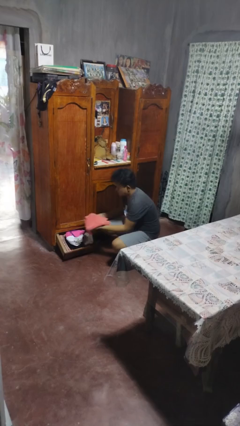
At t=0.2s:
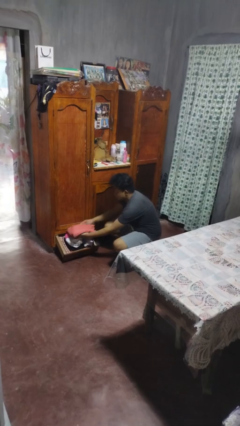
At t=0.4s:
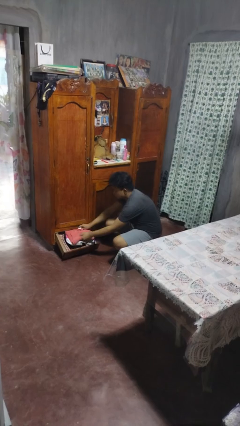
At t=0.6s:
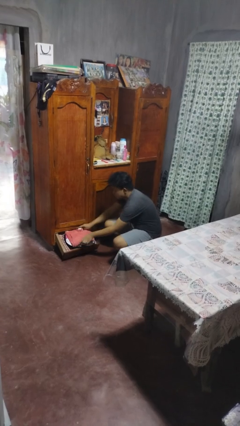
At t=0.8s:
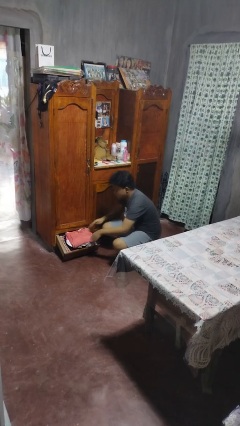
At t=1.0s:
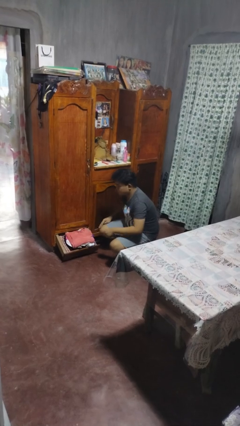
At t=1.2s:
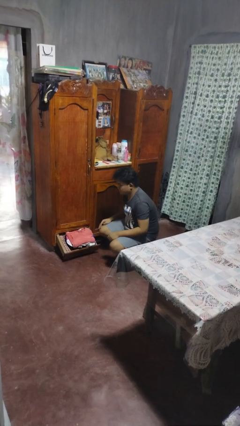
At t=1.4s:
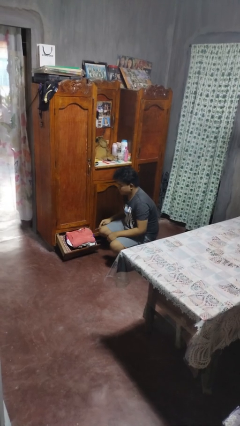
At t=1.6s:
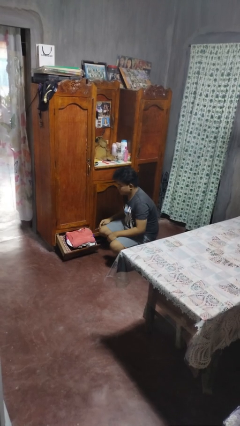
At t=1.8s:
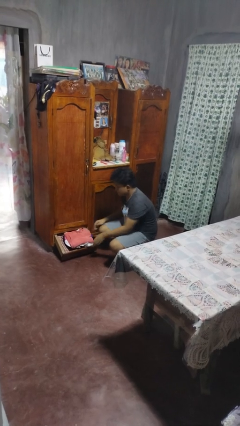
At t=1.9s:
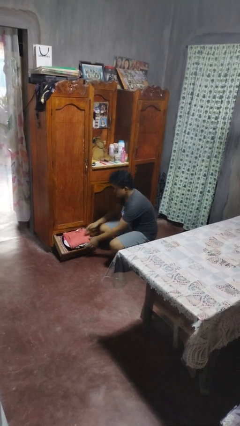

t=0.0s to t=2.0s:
person puts clothes into dresser

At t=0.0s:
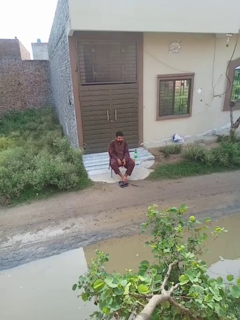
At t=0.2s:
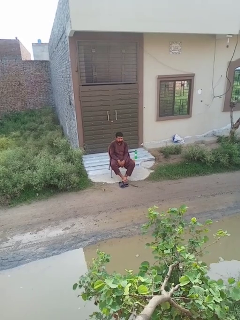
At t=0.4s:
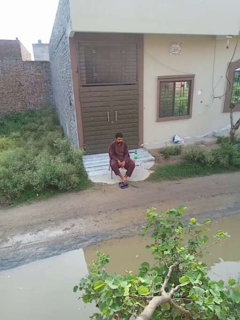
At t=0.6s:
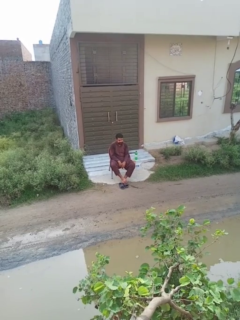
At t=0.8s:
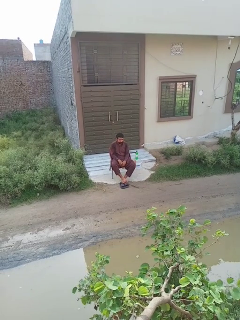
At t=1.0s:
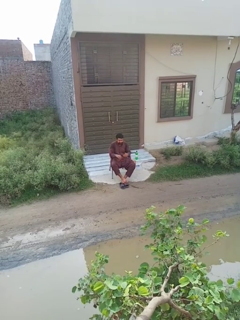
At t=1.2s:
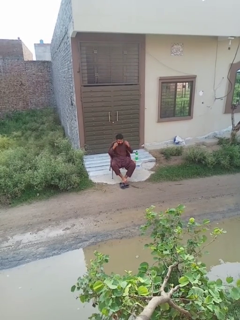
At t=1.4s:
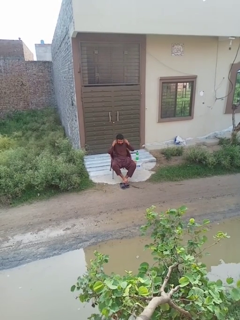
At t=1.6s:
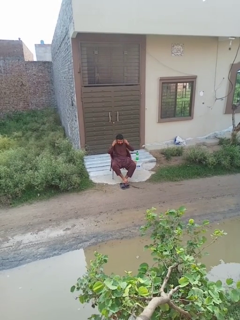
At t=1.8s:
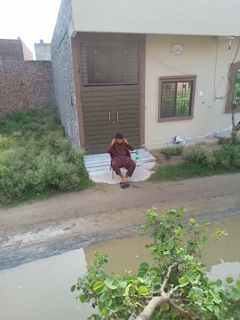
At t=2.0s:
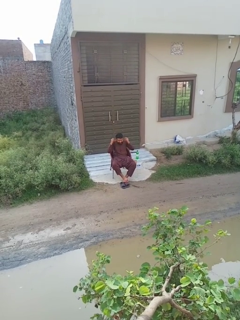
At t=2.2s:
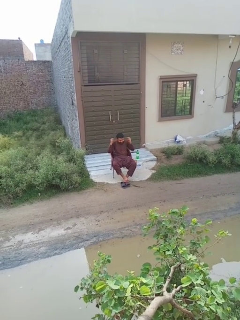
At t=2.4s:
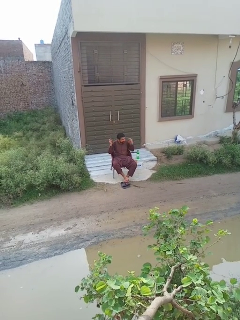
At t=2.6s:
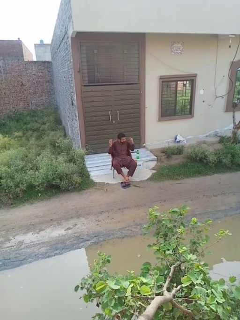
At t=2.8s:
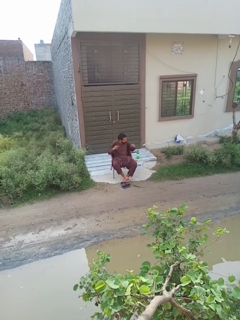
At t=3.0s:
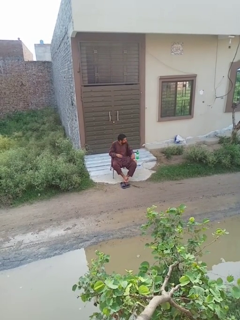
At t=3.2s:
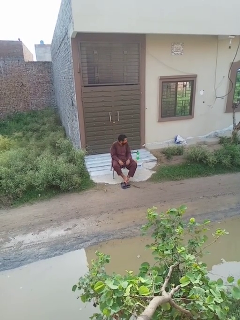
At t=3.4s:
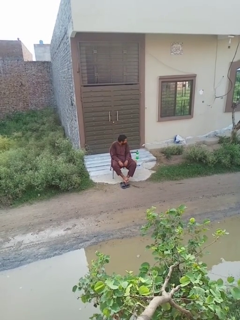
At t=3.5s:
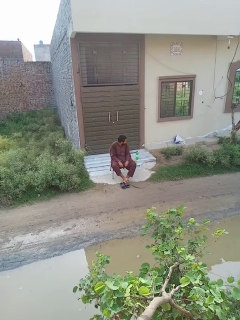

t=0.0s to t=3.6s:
person takes off earrings

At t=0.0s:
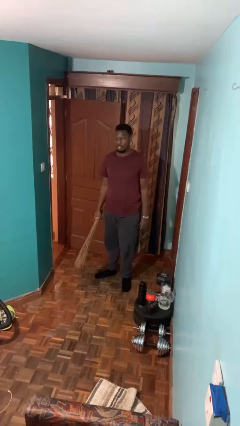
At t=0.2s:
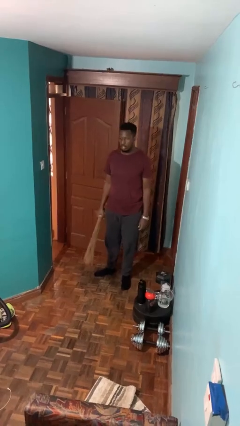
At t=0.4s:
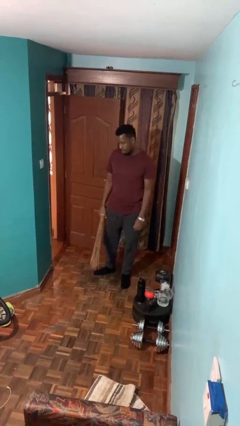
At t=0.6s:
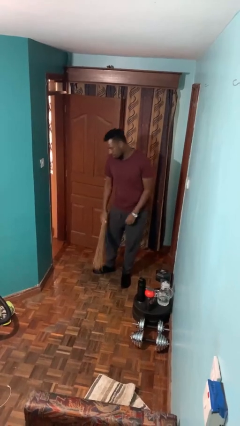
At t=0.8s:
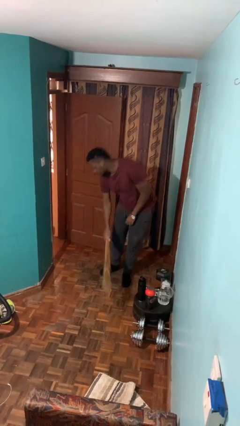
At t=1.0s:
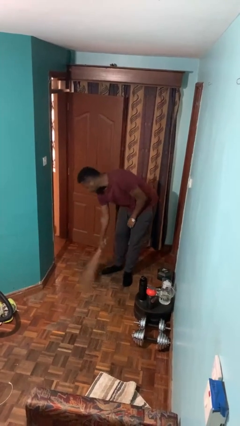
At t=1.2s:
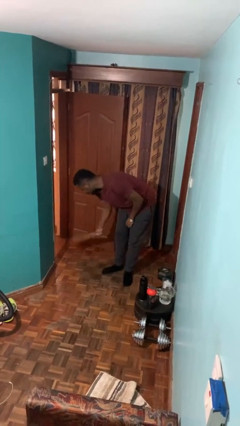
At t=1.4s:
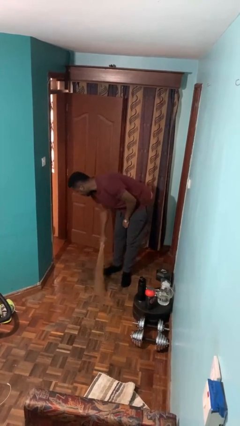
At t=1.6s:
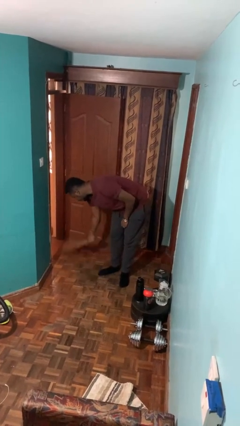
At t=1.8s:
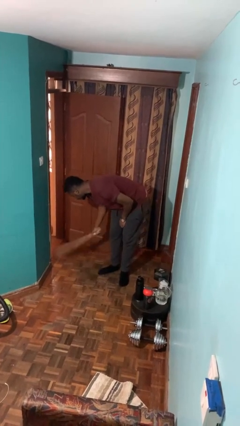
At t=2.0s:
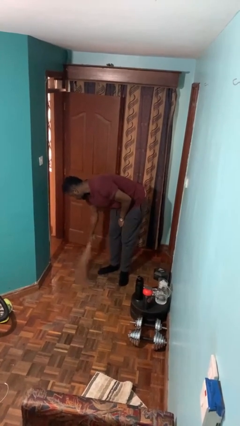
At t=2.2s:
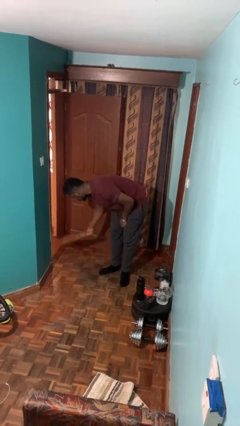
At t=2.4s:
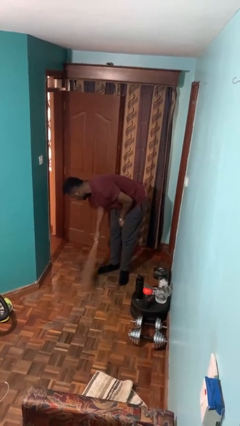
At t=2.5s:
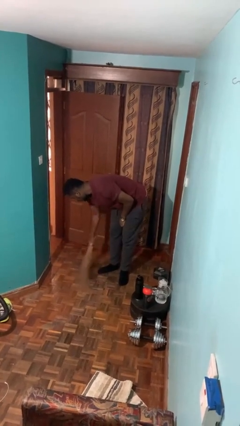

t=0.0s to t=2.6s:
person sweeps floor

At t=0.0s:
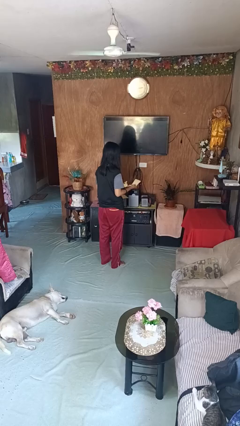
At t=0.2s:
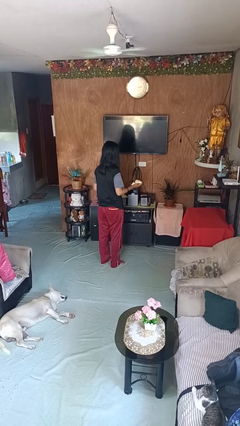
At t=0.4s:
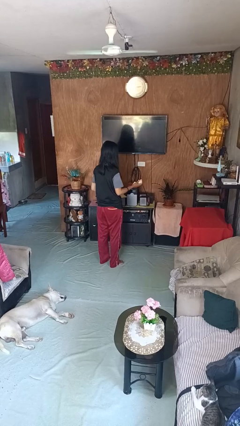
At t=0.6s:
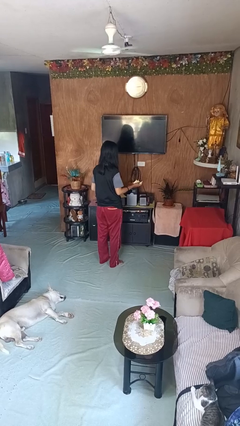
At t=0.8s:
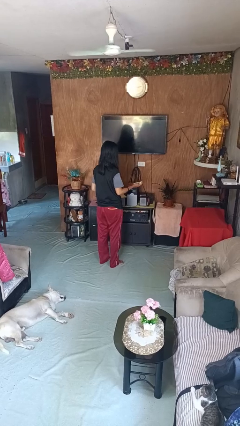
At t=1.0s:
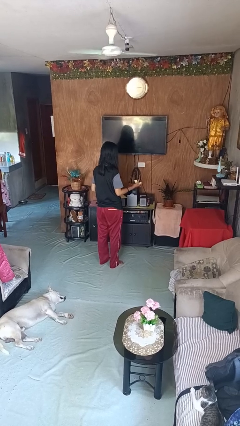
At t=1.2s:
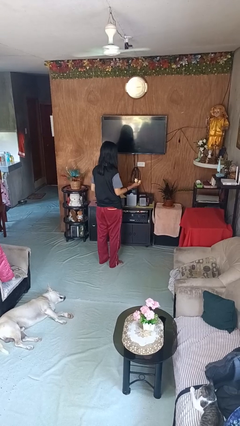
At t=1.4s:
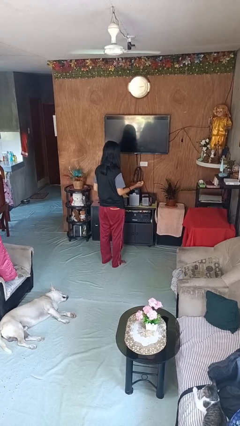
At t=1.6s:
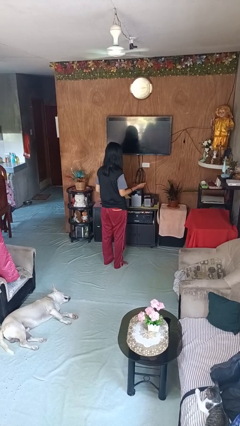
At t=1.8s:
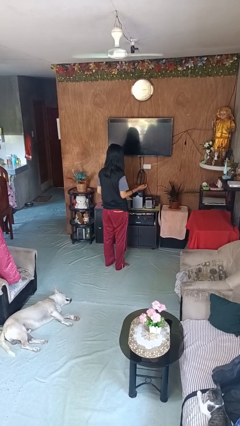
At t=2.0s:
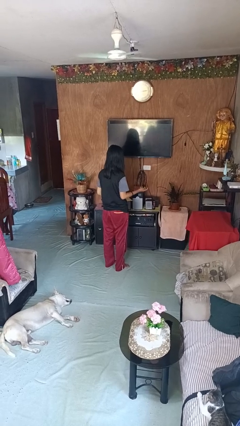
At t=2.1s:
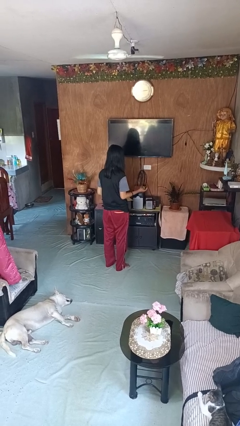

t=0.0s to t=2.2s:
person crumples paper

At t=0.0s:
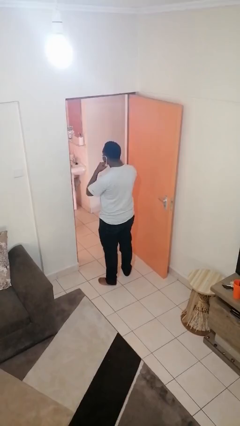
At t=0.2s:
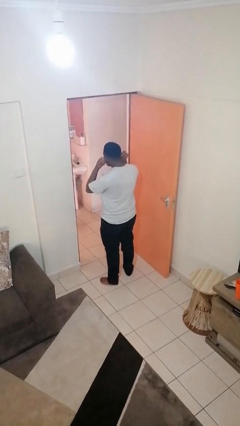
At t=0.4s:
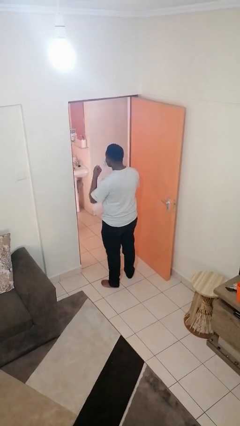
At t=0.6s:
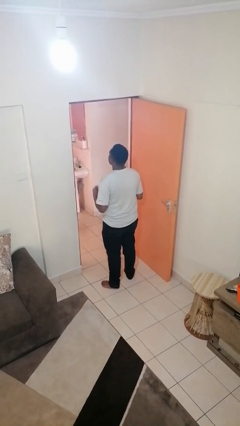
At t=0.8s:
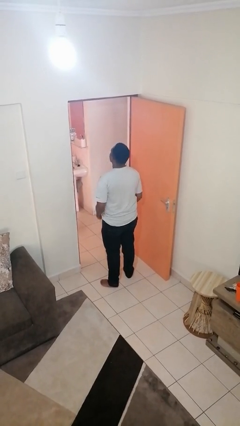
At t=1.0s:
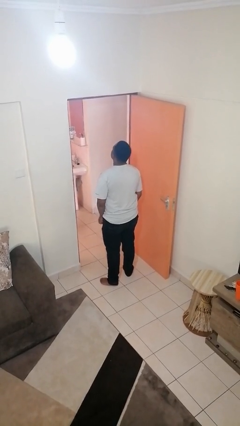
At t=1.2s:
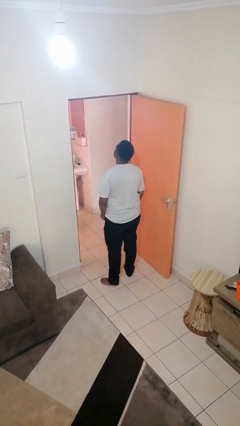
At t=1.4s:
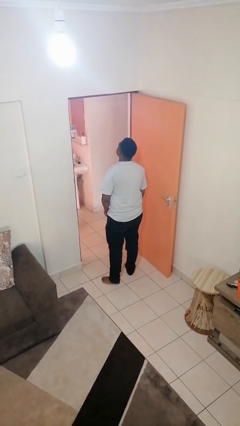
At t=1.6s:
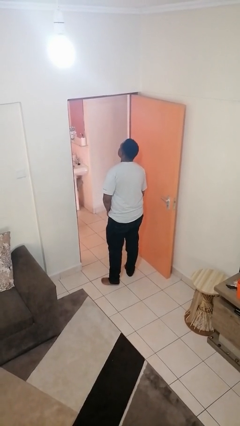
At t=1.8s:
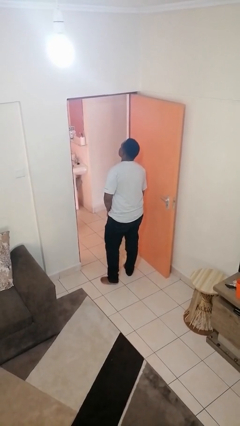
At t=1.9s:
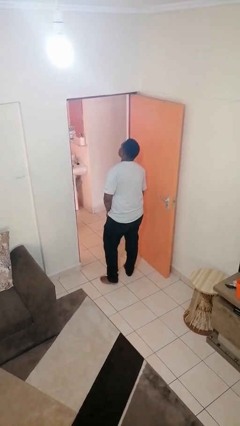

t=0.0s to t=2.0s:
person takes off facemask

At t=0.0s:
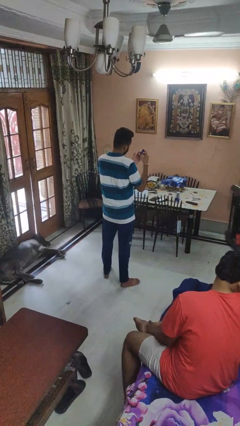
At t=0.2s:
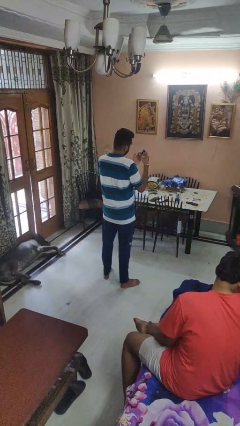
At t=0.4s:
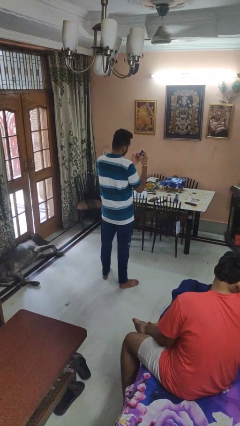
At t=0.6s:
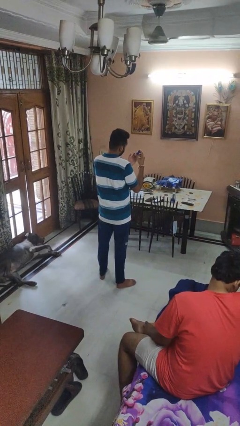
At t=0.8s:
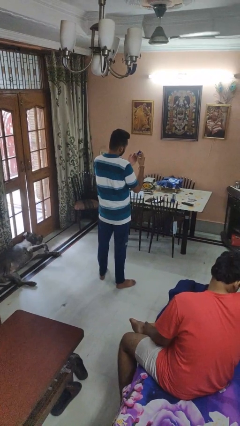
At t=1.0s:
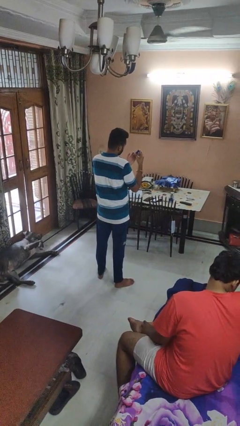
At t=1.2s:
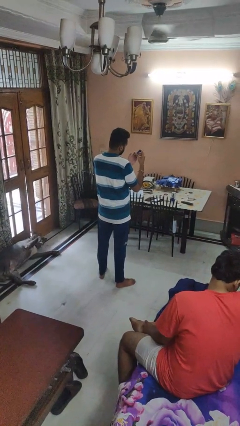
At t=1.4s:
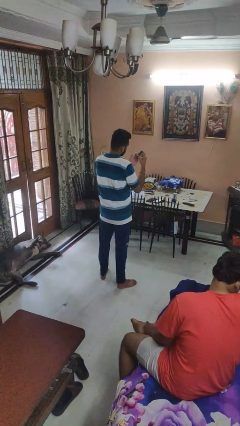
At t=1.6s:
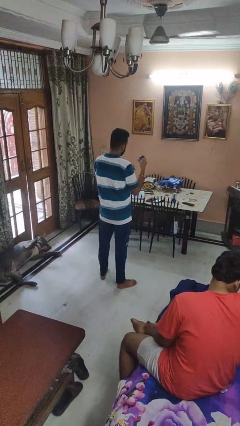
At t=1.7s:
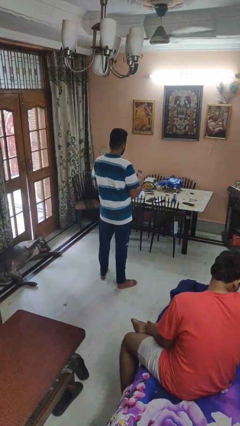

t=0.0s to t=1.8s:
person clips fingernails

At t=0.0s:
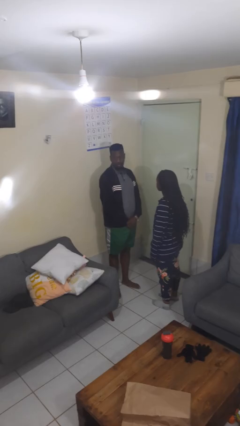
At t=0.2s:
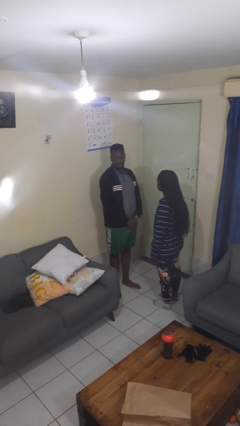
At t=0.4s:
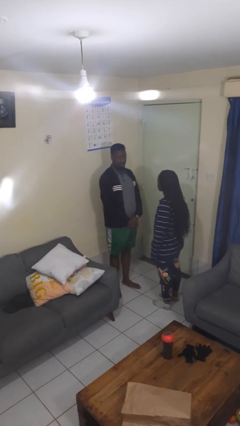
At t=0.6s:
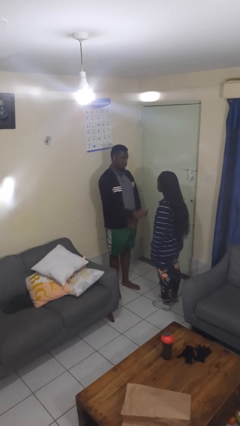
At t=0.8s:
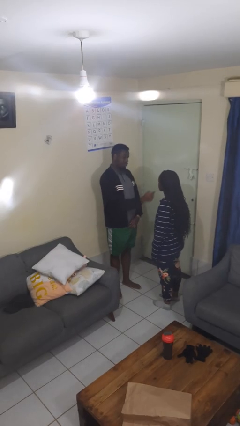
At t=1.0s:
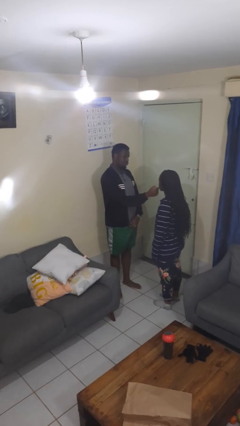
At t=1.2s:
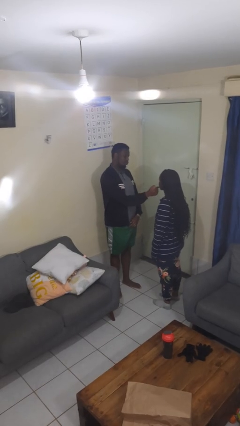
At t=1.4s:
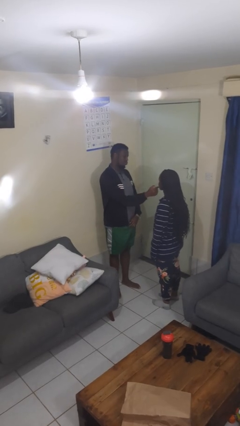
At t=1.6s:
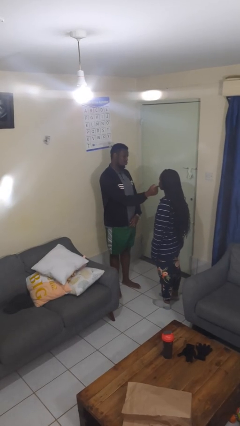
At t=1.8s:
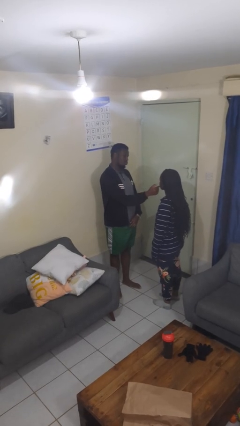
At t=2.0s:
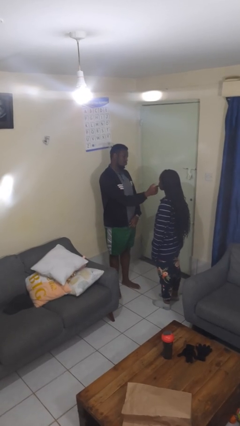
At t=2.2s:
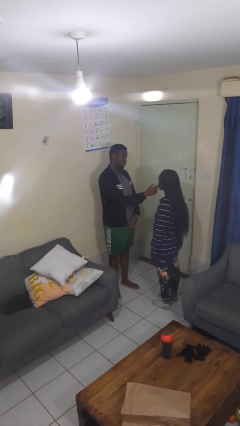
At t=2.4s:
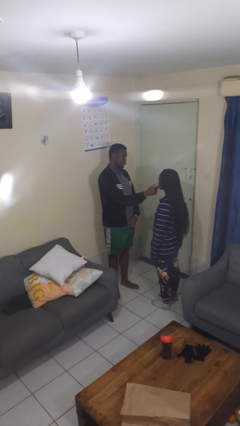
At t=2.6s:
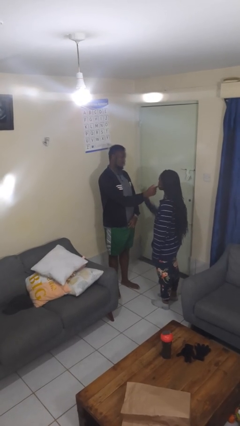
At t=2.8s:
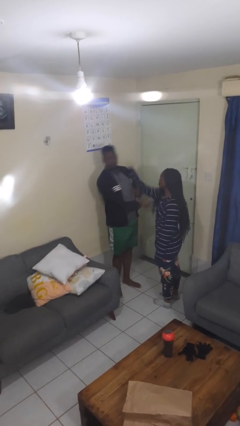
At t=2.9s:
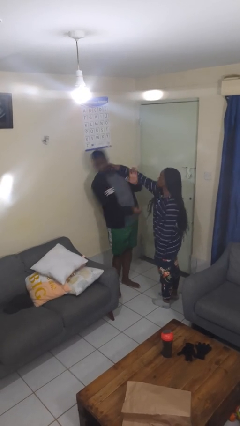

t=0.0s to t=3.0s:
person touches face of person

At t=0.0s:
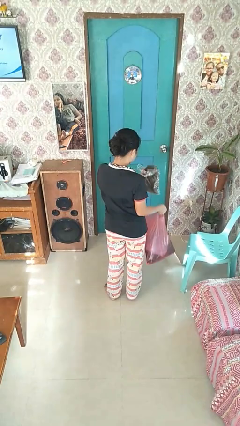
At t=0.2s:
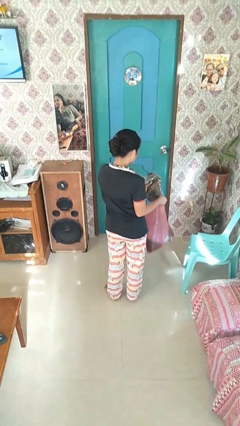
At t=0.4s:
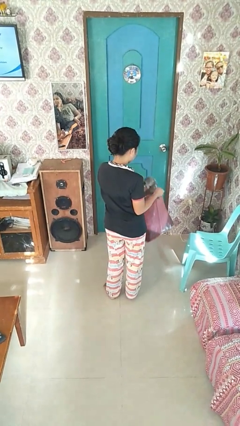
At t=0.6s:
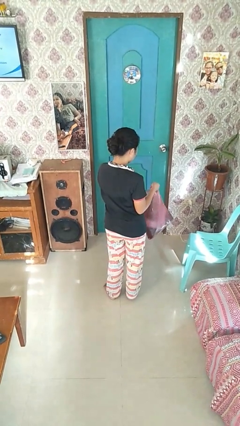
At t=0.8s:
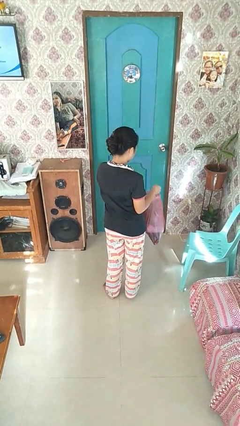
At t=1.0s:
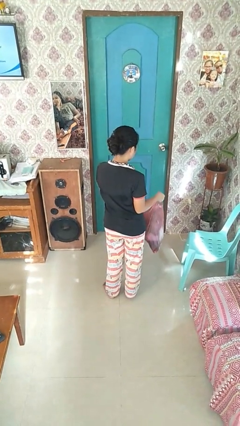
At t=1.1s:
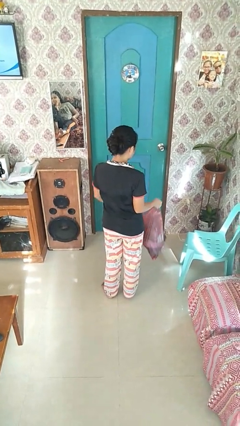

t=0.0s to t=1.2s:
person puts object into bag
